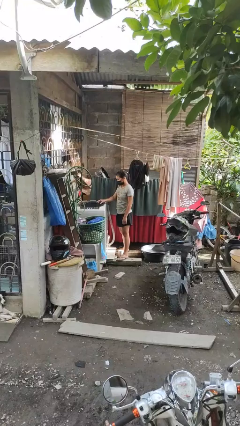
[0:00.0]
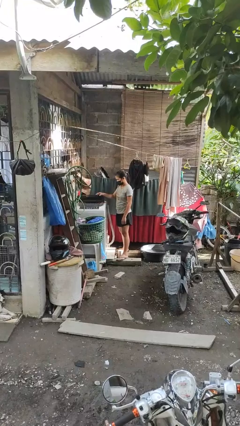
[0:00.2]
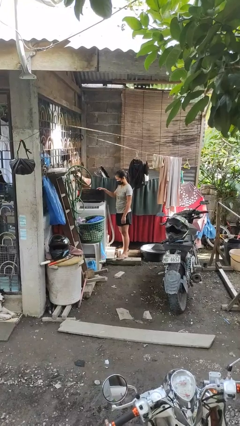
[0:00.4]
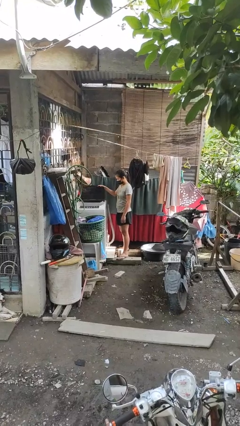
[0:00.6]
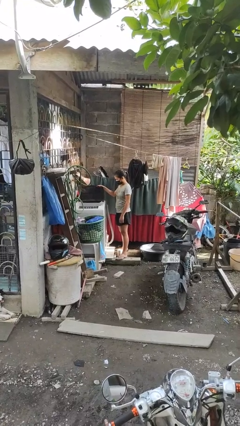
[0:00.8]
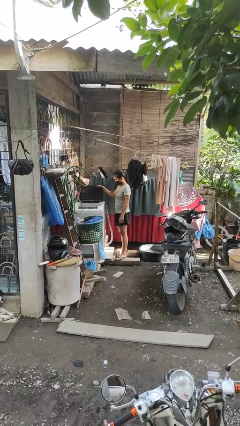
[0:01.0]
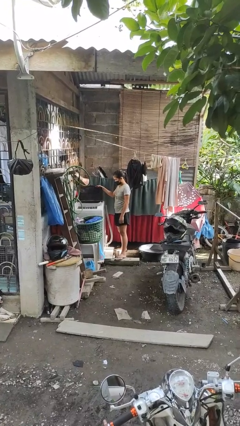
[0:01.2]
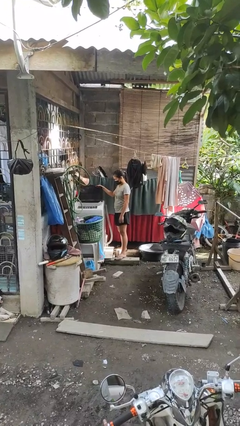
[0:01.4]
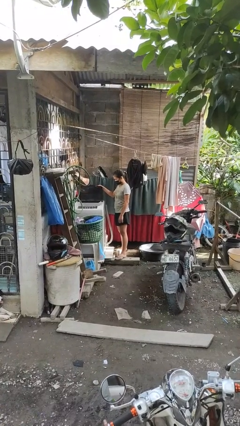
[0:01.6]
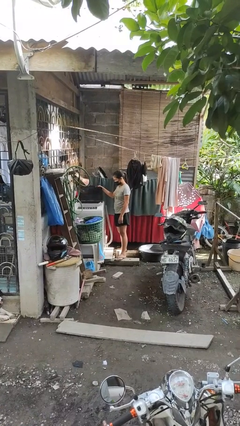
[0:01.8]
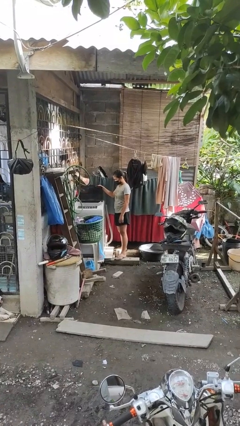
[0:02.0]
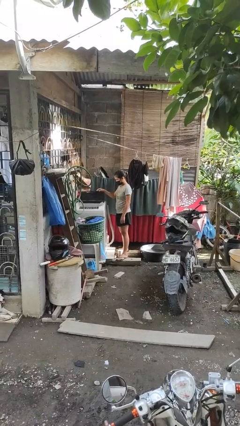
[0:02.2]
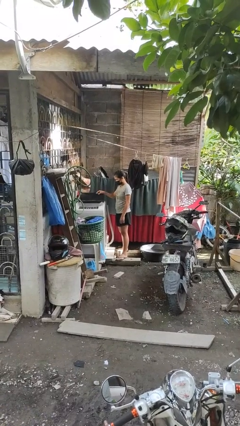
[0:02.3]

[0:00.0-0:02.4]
person opens clothes washer

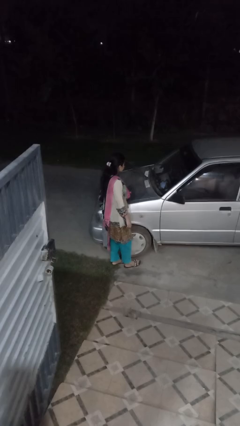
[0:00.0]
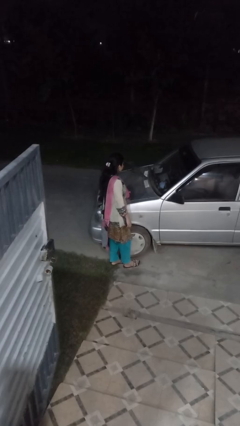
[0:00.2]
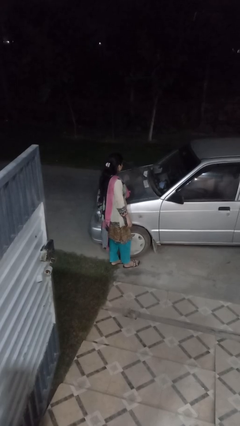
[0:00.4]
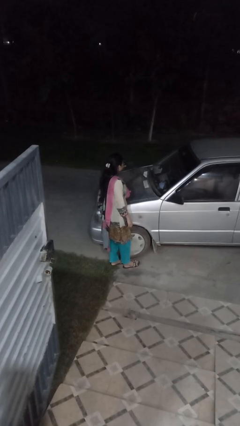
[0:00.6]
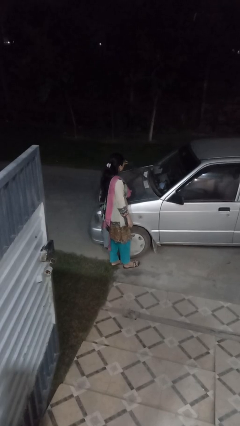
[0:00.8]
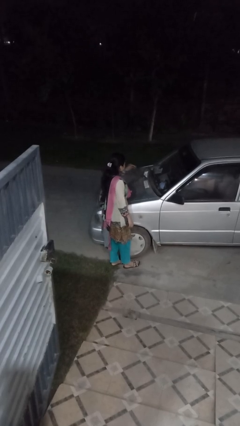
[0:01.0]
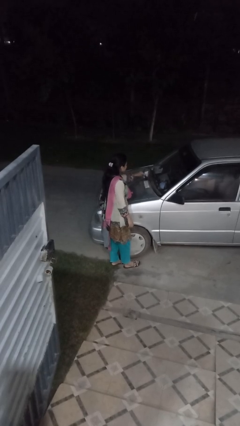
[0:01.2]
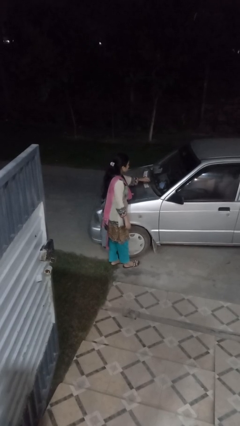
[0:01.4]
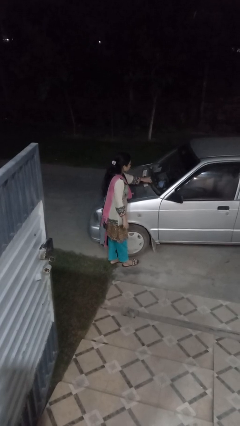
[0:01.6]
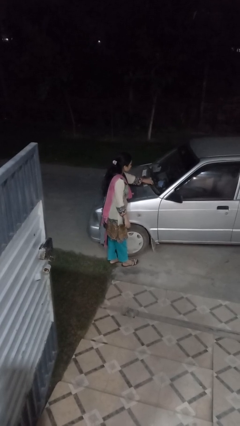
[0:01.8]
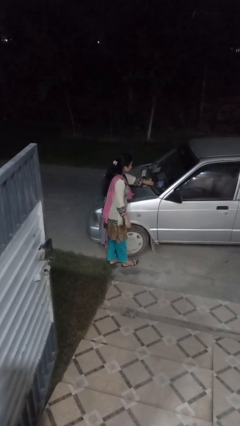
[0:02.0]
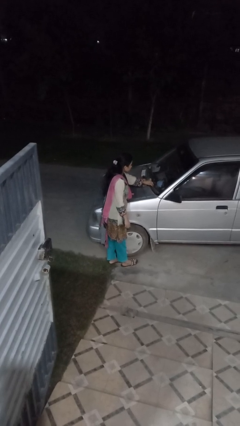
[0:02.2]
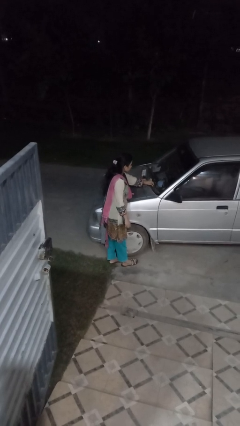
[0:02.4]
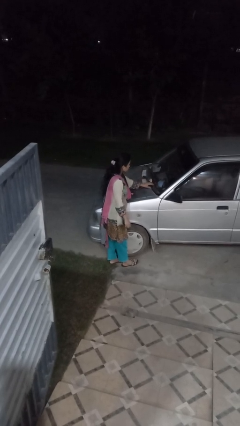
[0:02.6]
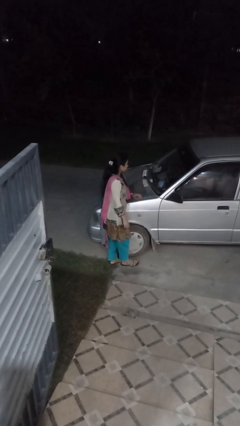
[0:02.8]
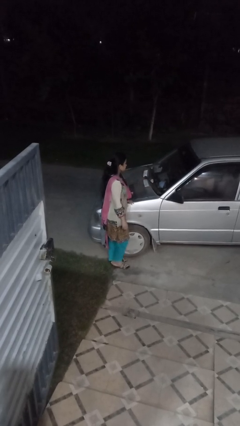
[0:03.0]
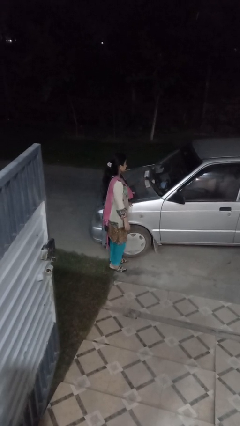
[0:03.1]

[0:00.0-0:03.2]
person flips down car wipers

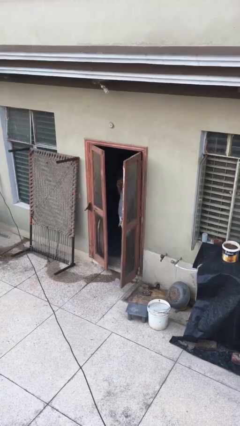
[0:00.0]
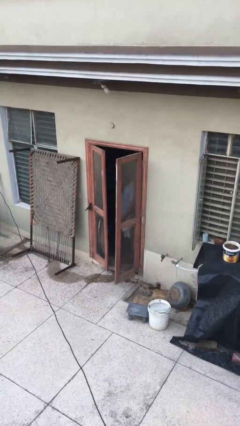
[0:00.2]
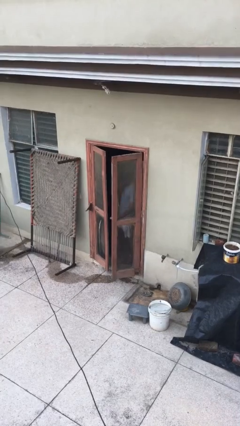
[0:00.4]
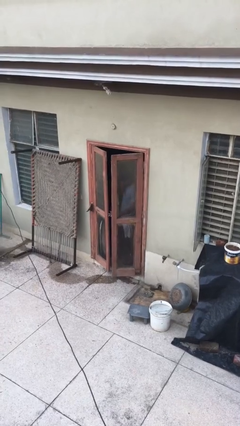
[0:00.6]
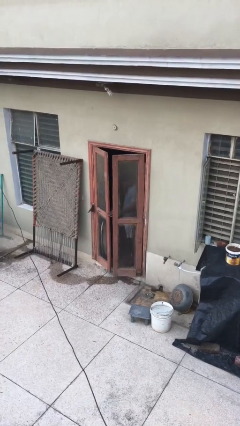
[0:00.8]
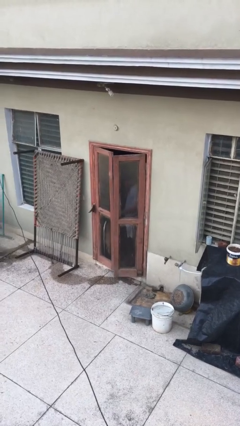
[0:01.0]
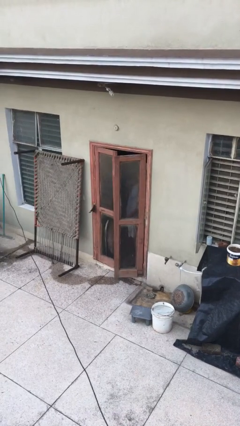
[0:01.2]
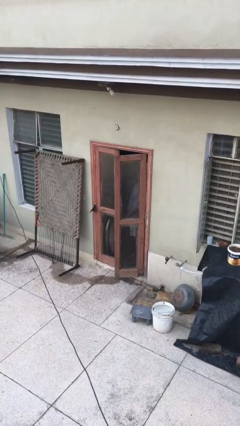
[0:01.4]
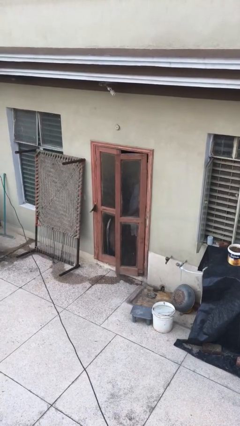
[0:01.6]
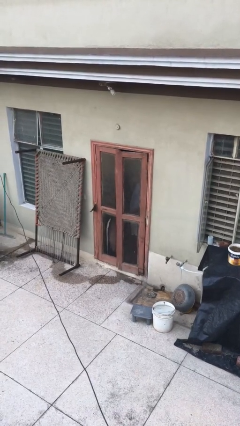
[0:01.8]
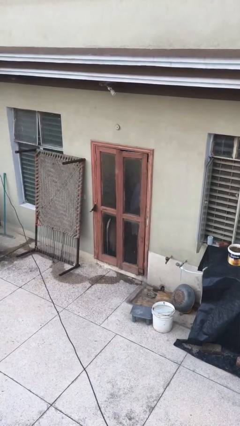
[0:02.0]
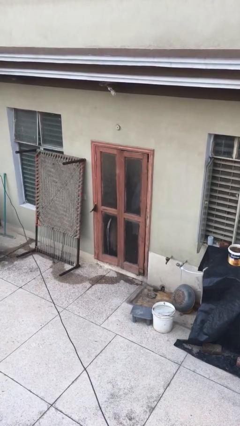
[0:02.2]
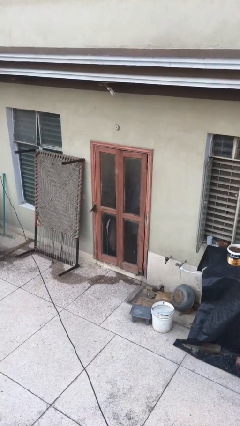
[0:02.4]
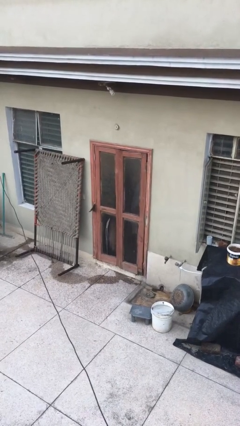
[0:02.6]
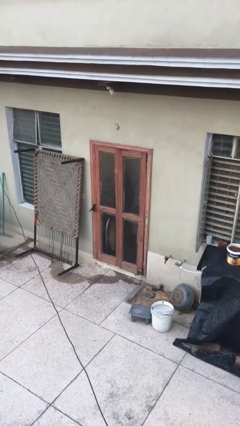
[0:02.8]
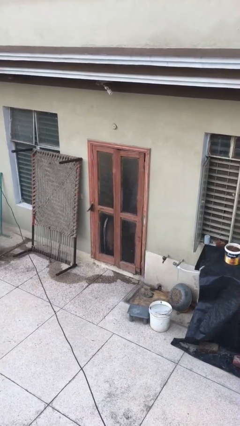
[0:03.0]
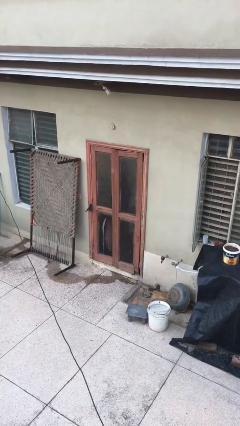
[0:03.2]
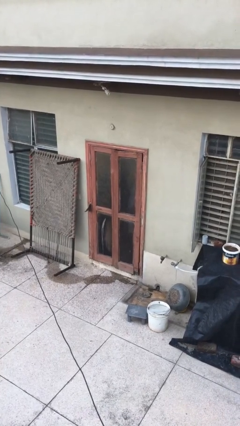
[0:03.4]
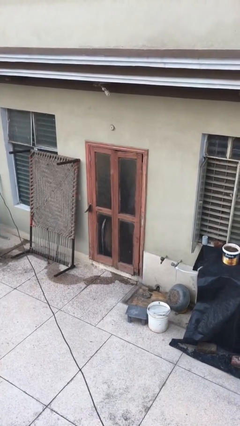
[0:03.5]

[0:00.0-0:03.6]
person closes facility door

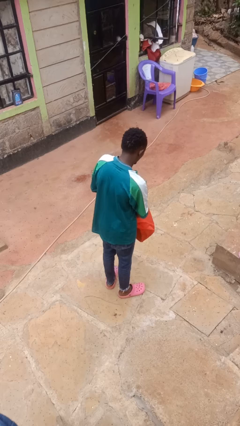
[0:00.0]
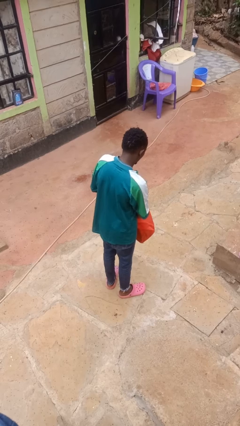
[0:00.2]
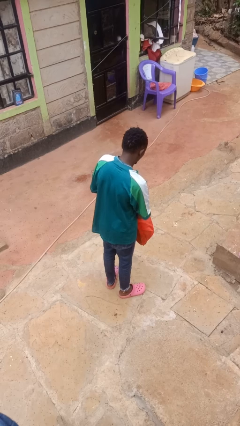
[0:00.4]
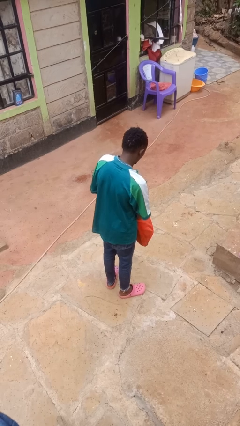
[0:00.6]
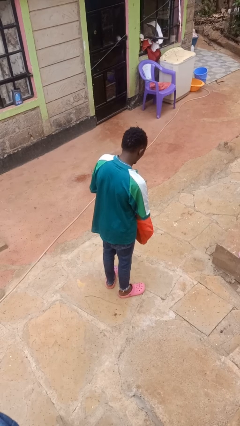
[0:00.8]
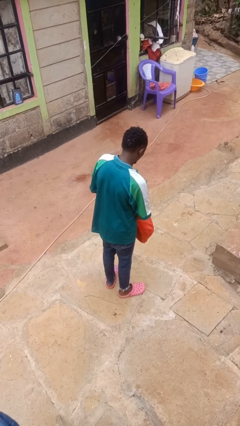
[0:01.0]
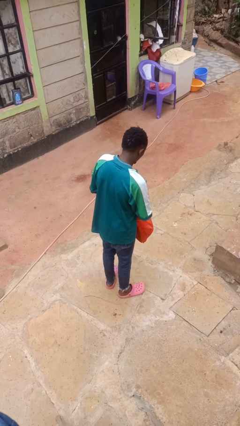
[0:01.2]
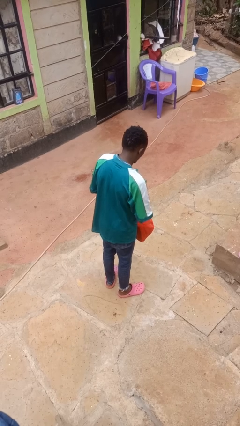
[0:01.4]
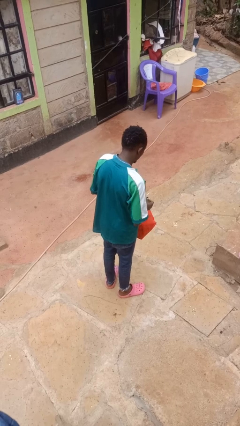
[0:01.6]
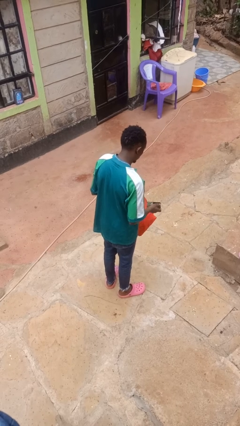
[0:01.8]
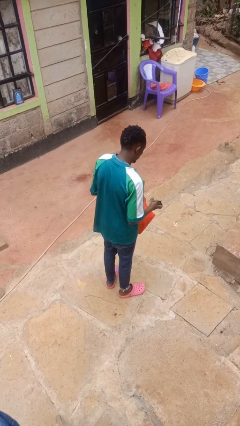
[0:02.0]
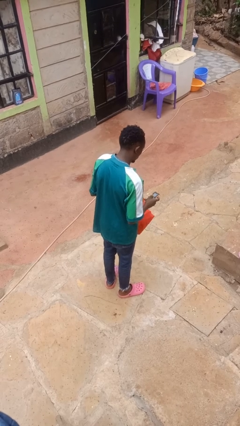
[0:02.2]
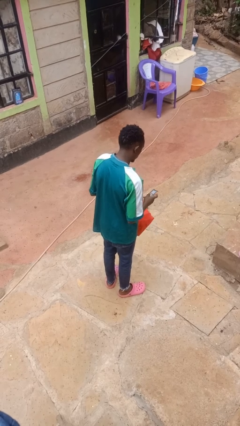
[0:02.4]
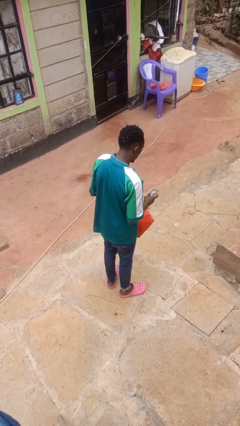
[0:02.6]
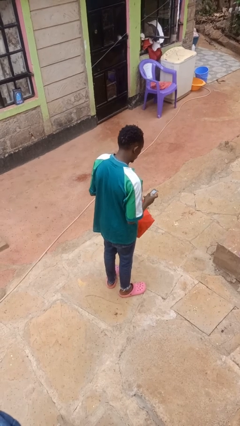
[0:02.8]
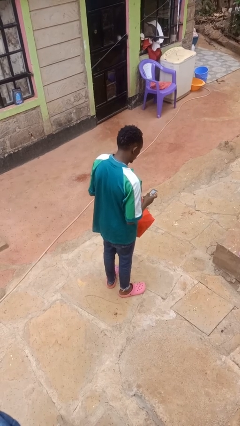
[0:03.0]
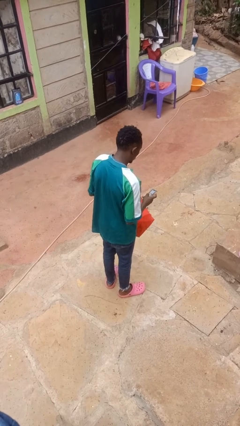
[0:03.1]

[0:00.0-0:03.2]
person takes object from bag

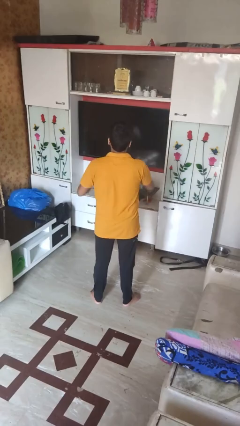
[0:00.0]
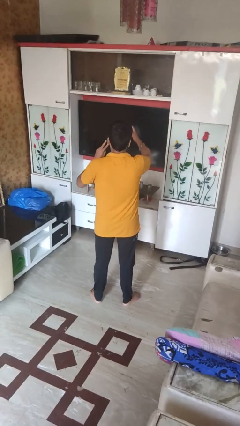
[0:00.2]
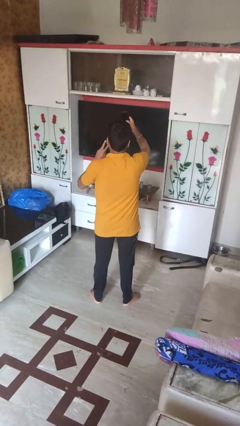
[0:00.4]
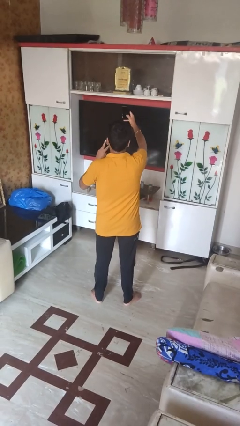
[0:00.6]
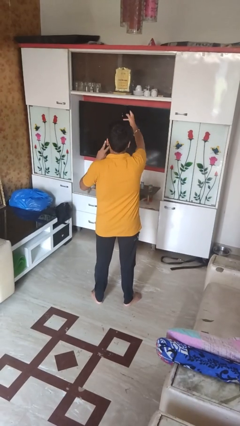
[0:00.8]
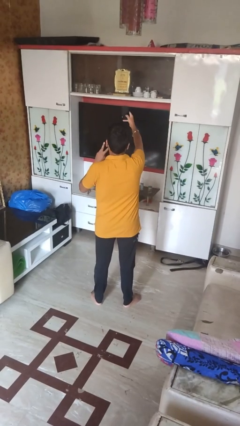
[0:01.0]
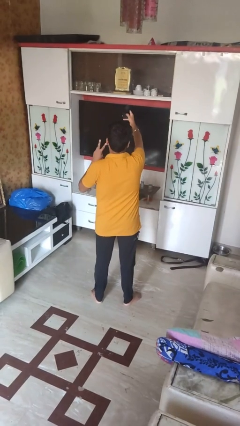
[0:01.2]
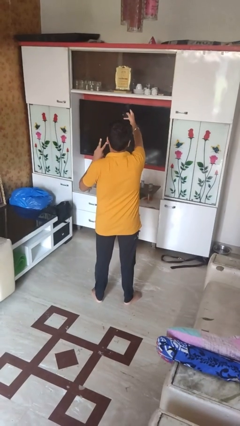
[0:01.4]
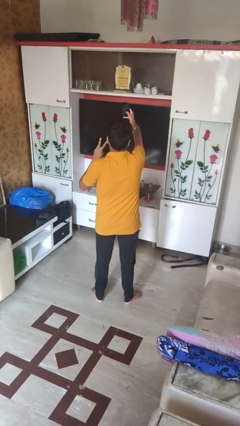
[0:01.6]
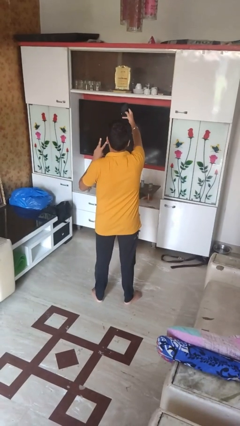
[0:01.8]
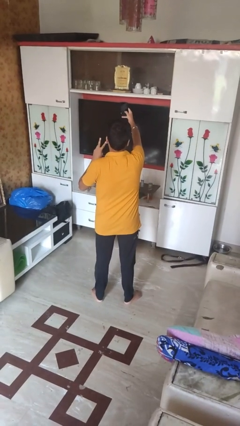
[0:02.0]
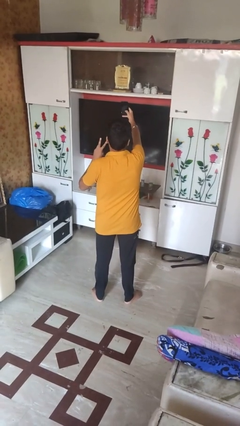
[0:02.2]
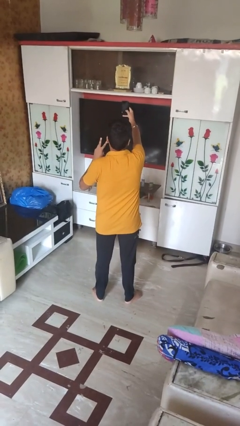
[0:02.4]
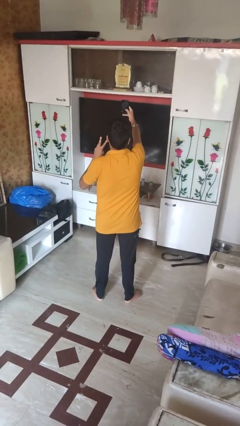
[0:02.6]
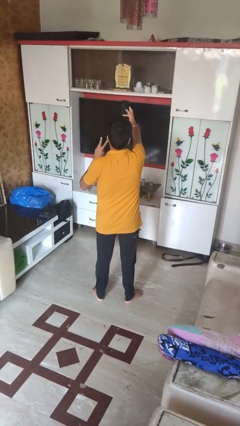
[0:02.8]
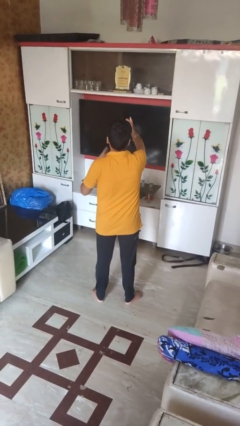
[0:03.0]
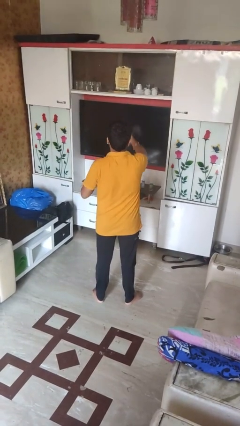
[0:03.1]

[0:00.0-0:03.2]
person takes selfie

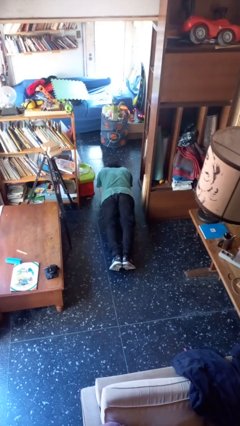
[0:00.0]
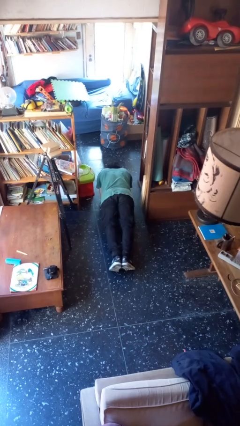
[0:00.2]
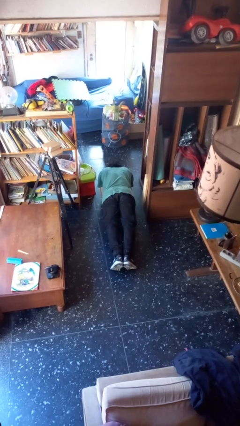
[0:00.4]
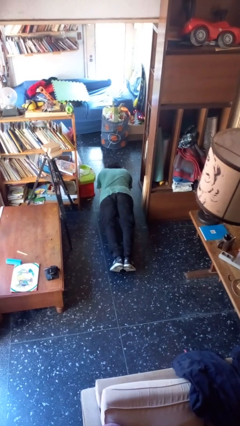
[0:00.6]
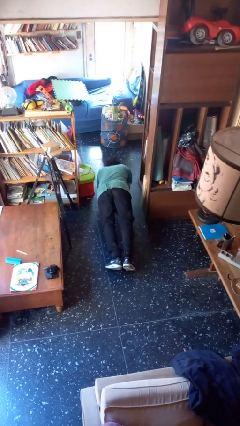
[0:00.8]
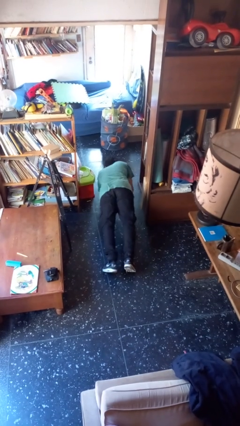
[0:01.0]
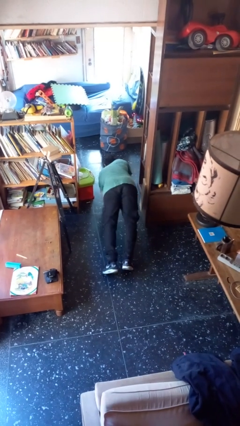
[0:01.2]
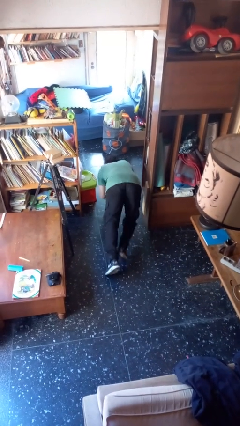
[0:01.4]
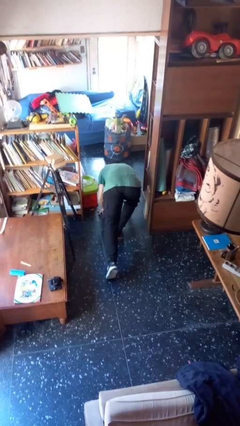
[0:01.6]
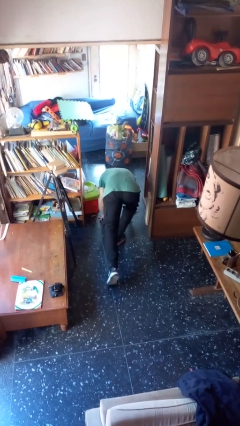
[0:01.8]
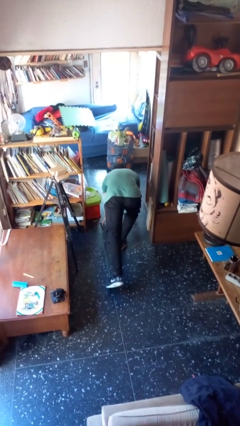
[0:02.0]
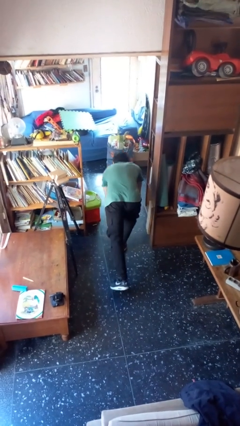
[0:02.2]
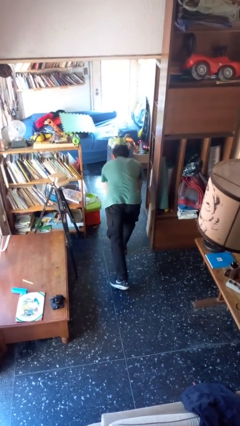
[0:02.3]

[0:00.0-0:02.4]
person stands up from floor
